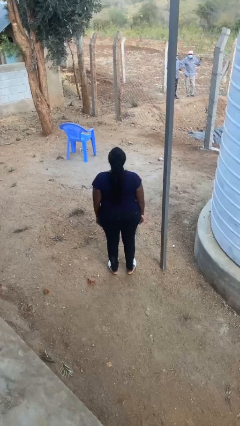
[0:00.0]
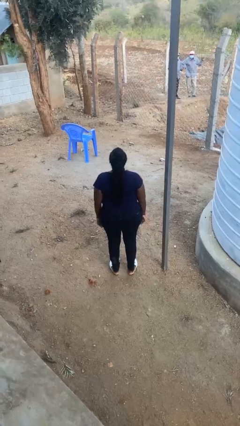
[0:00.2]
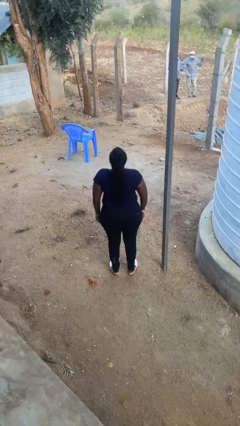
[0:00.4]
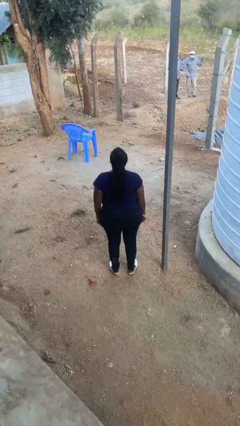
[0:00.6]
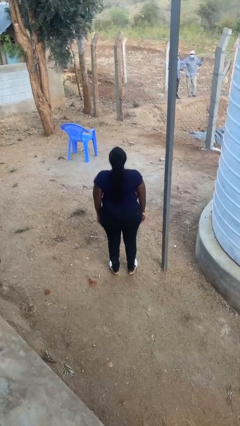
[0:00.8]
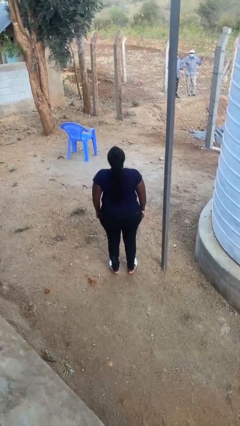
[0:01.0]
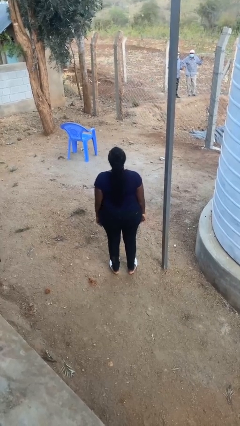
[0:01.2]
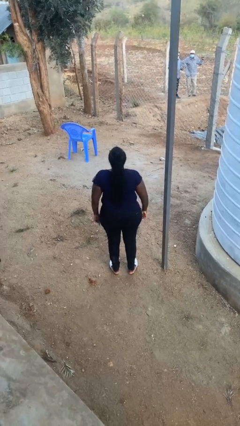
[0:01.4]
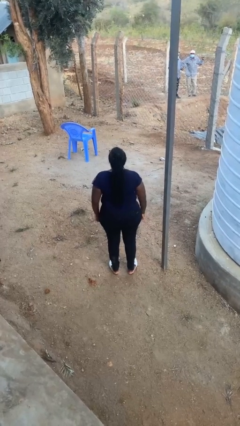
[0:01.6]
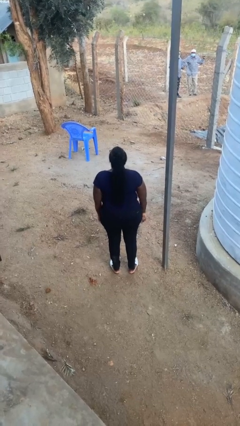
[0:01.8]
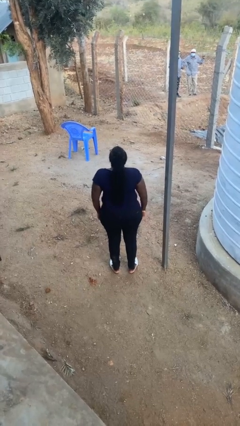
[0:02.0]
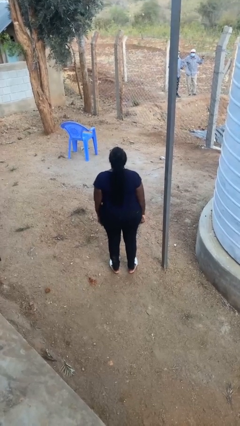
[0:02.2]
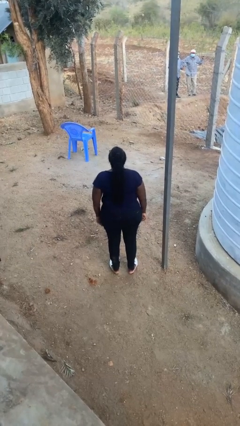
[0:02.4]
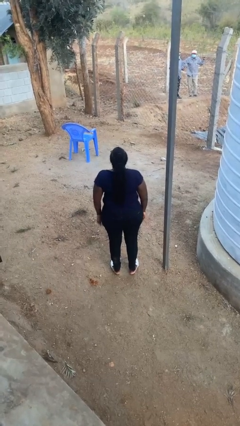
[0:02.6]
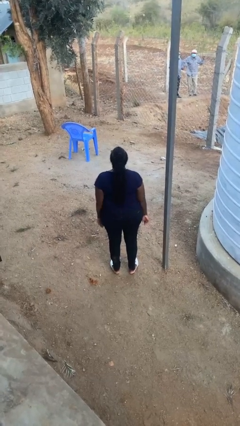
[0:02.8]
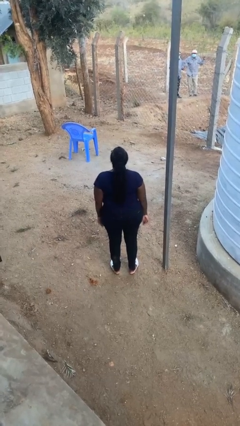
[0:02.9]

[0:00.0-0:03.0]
person shrugs

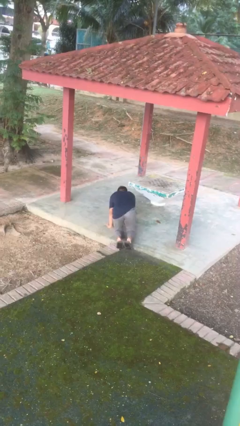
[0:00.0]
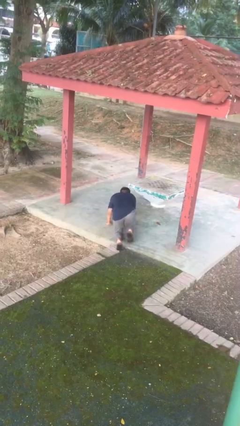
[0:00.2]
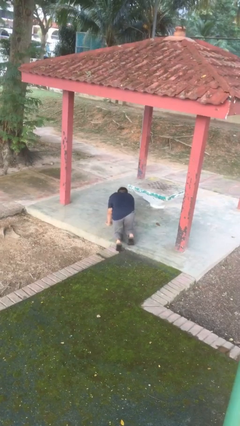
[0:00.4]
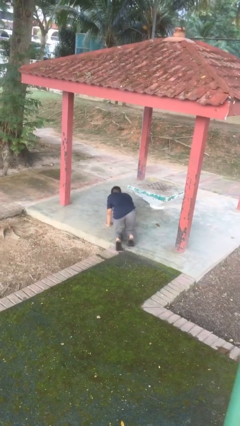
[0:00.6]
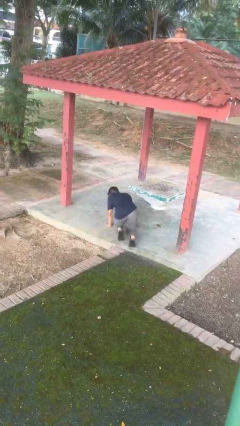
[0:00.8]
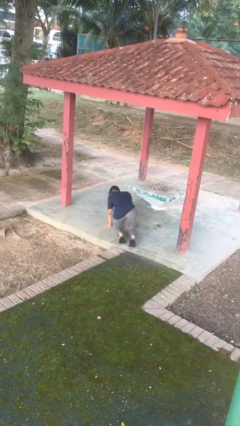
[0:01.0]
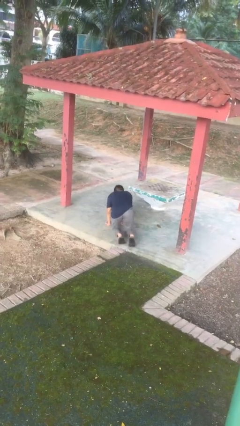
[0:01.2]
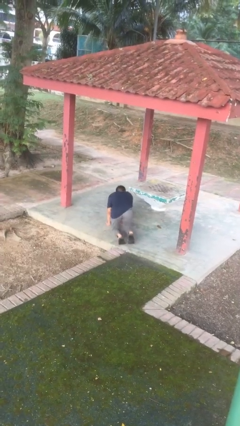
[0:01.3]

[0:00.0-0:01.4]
person crawls

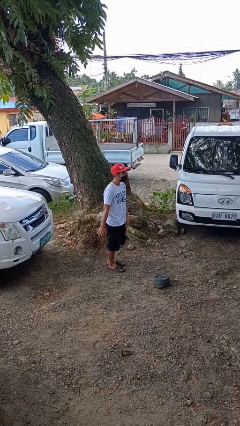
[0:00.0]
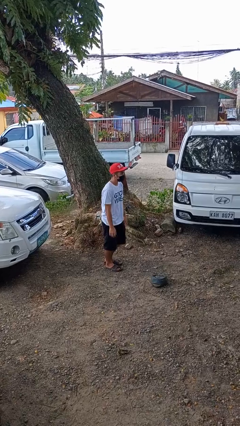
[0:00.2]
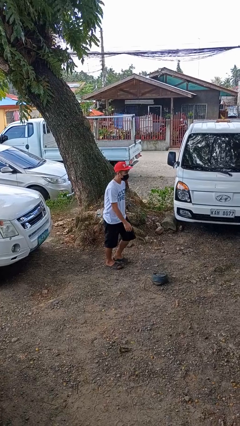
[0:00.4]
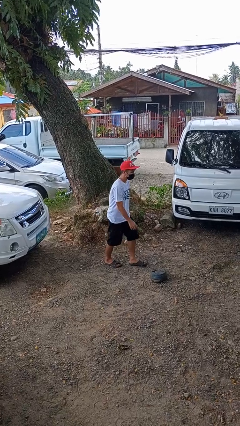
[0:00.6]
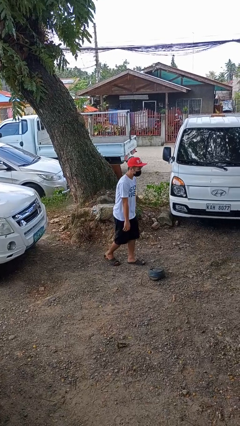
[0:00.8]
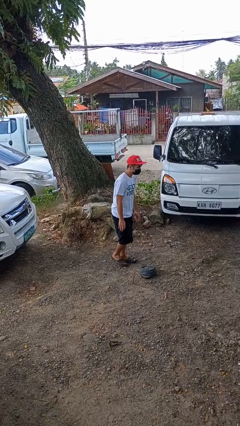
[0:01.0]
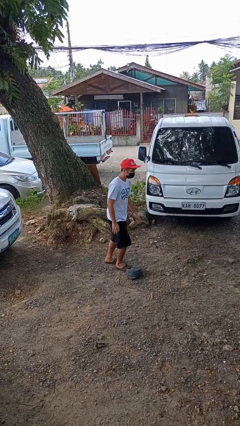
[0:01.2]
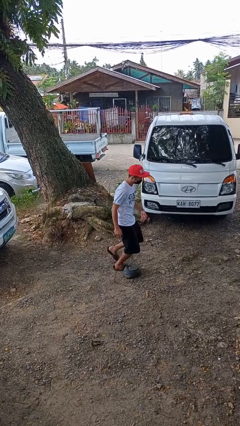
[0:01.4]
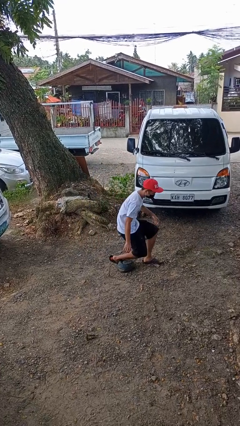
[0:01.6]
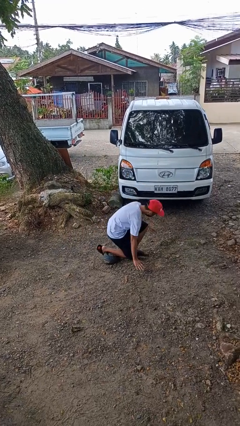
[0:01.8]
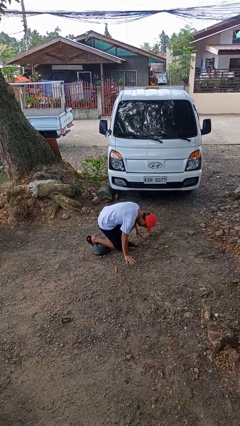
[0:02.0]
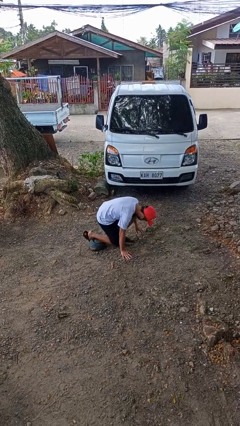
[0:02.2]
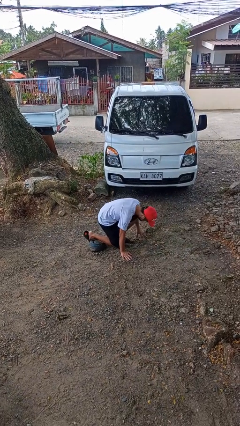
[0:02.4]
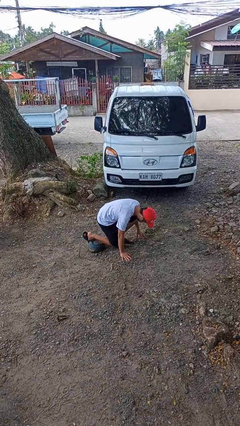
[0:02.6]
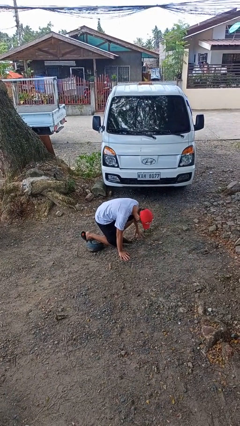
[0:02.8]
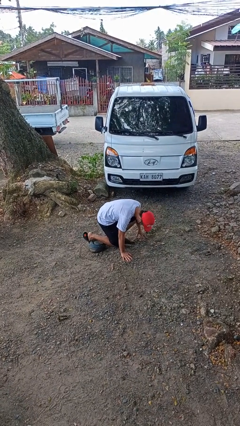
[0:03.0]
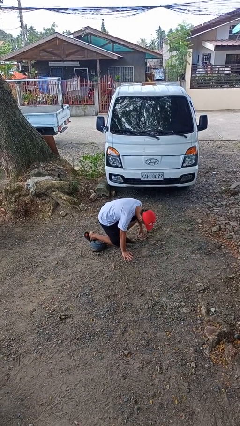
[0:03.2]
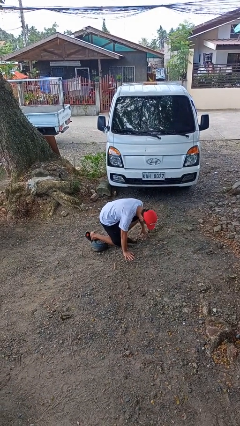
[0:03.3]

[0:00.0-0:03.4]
person trips on object on floor

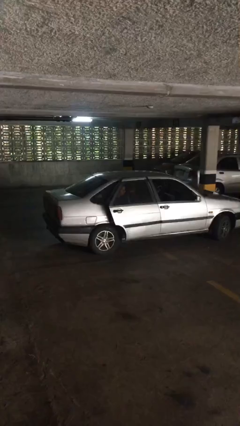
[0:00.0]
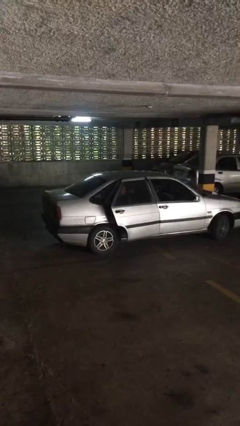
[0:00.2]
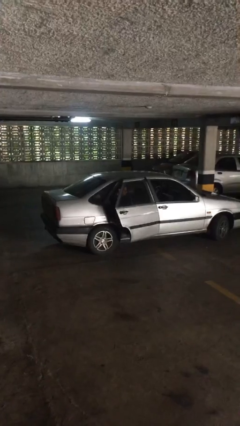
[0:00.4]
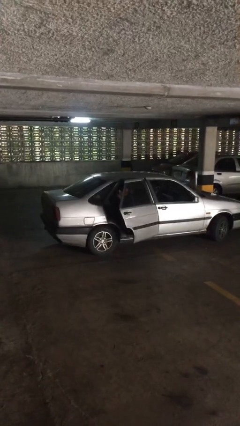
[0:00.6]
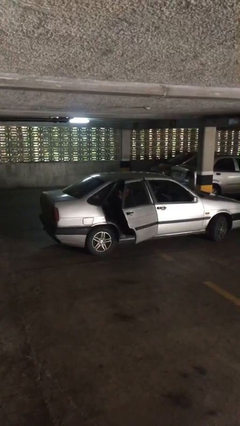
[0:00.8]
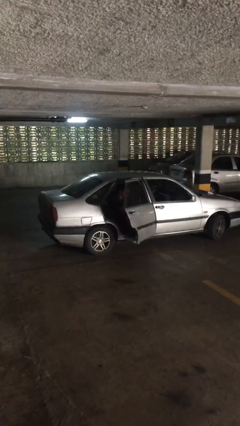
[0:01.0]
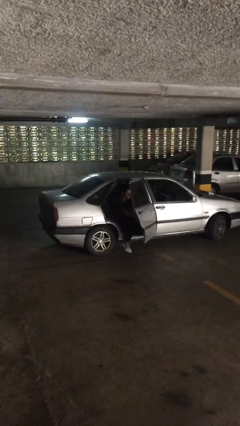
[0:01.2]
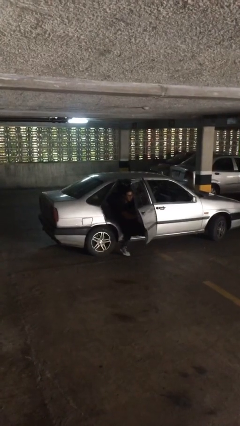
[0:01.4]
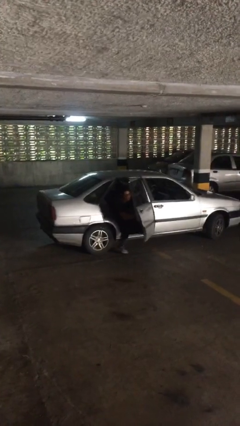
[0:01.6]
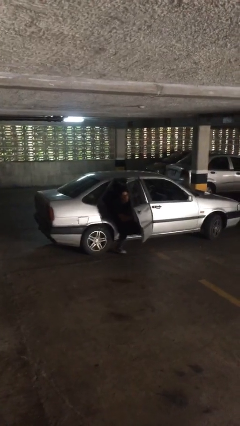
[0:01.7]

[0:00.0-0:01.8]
person opens car door

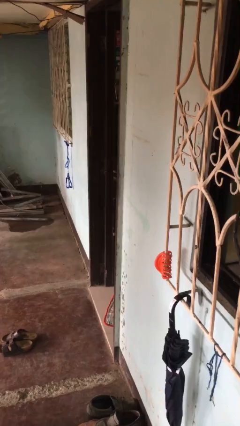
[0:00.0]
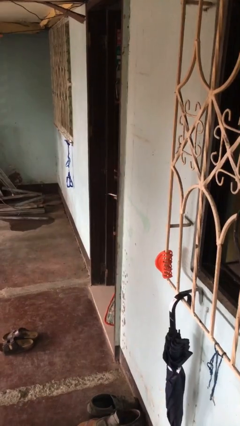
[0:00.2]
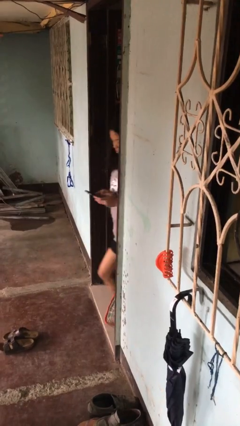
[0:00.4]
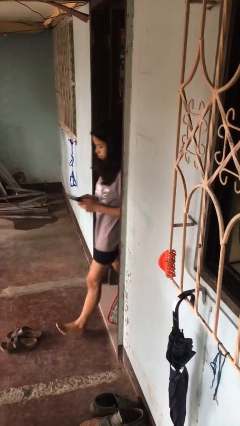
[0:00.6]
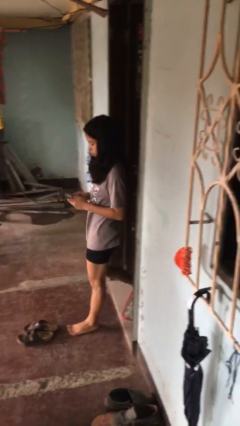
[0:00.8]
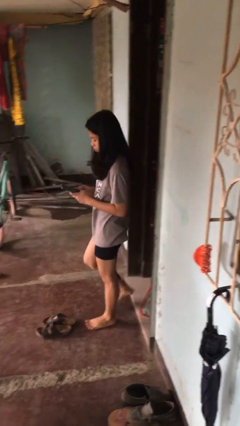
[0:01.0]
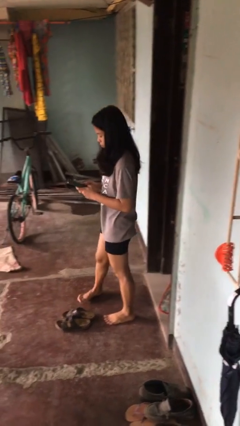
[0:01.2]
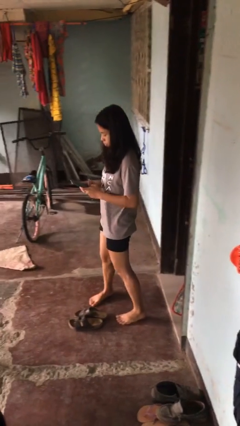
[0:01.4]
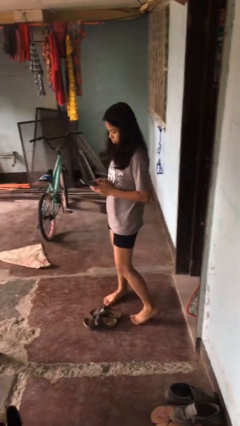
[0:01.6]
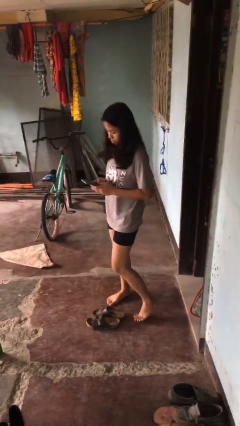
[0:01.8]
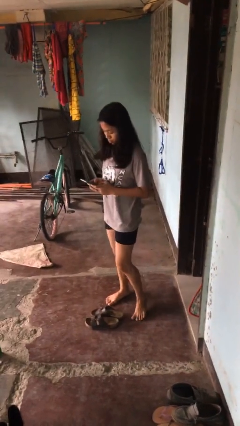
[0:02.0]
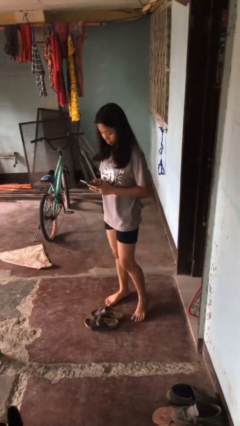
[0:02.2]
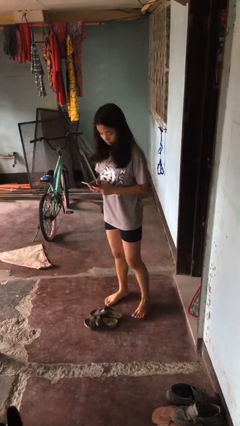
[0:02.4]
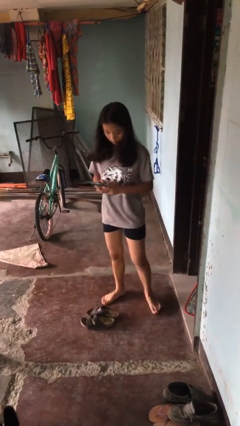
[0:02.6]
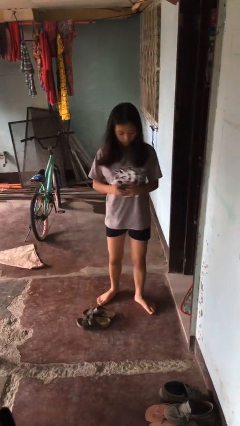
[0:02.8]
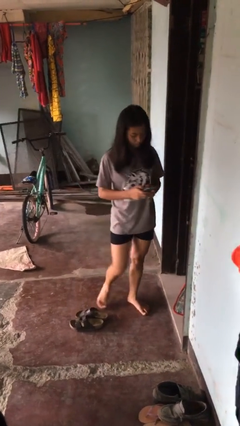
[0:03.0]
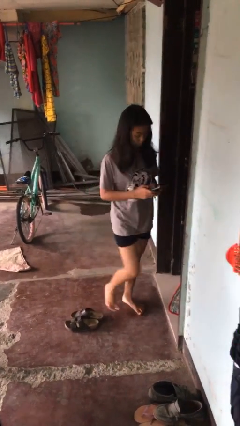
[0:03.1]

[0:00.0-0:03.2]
person enters scene through structure

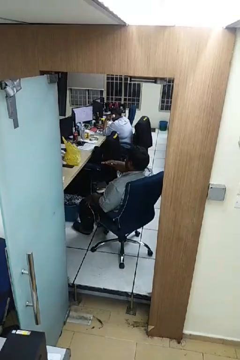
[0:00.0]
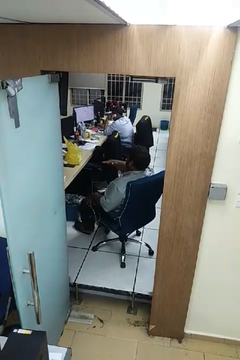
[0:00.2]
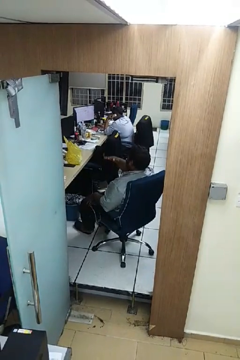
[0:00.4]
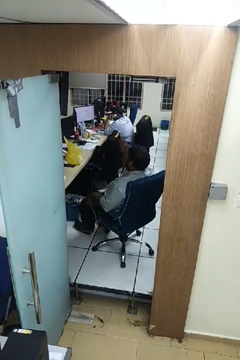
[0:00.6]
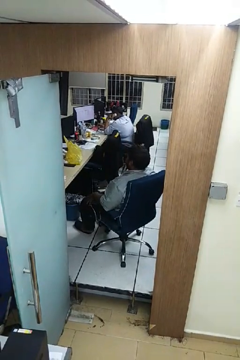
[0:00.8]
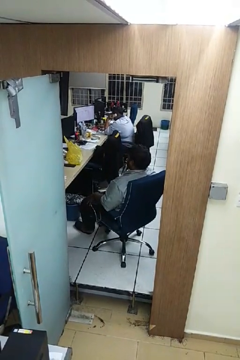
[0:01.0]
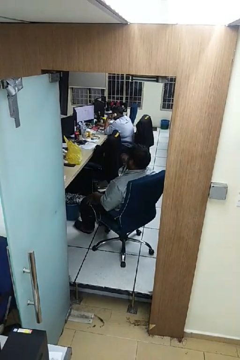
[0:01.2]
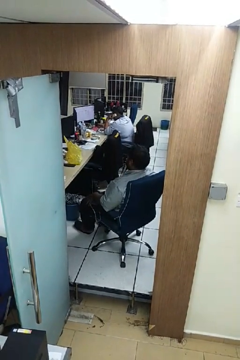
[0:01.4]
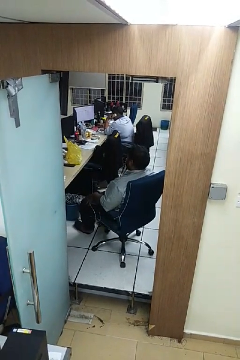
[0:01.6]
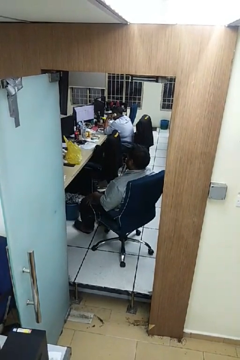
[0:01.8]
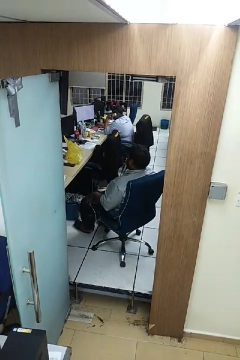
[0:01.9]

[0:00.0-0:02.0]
person gestures swipe right

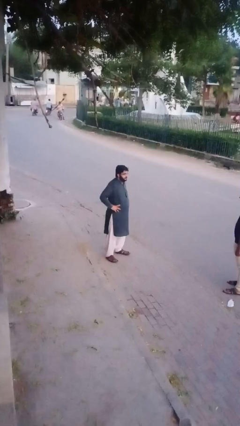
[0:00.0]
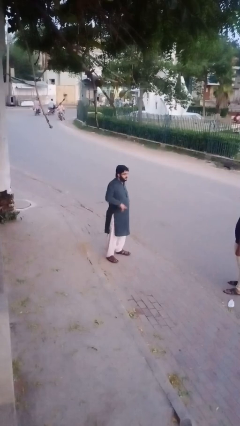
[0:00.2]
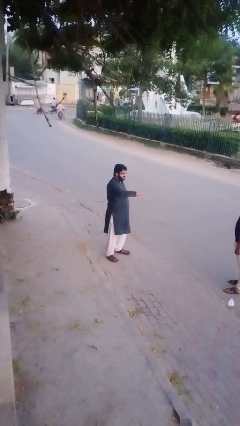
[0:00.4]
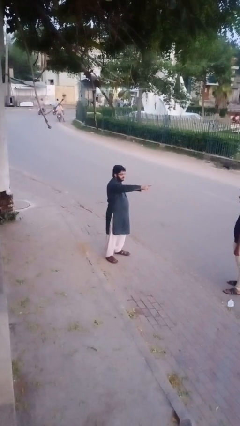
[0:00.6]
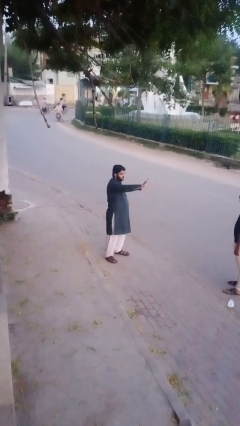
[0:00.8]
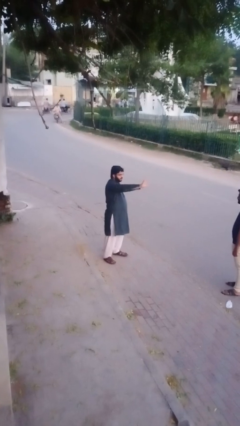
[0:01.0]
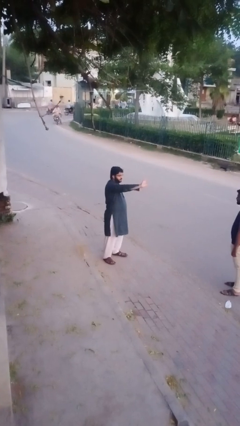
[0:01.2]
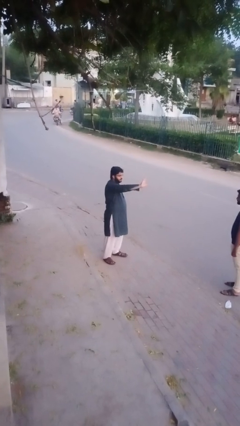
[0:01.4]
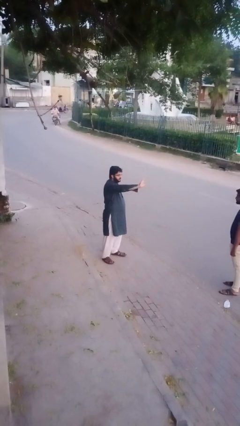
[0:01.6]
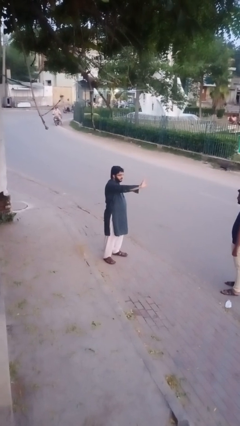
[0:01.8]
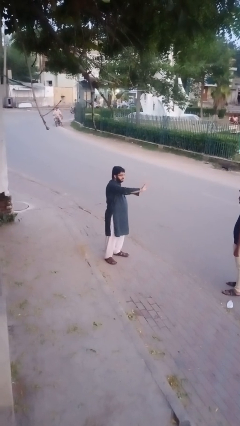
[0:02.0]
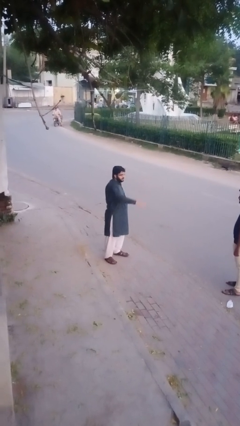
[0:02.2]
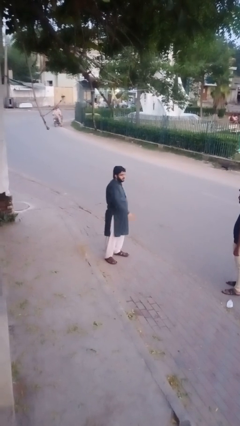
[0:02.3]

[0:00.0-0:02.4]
person waves at person

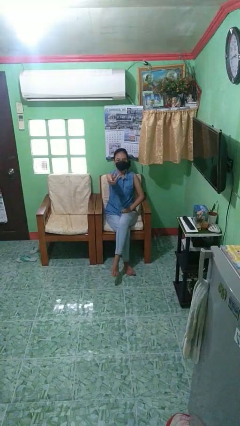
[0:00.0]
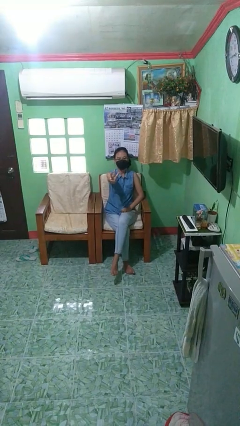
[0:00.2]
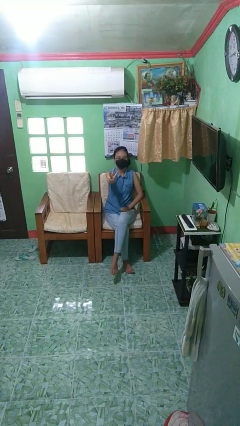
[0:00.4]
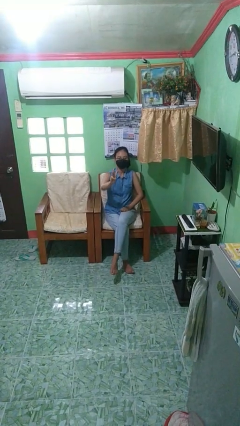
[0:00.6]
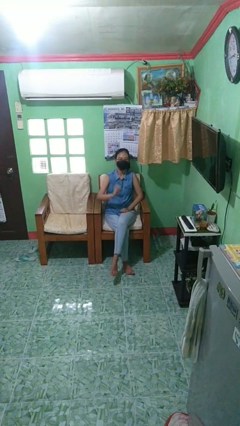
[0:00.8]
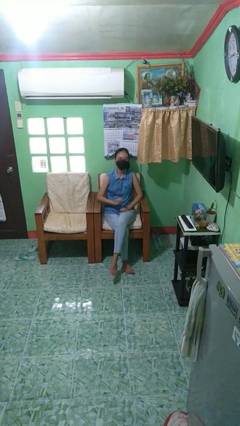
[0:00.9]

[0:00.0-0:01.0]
person gestures number three
